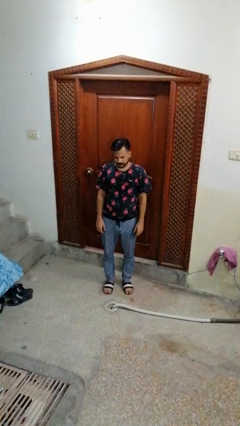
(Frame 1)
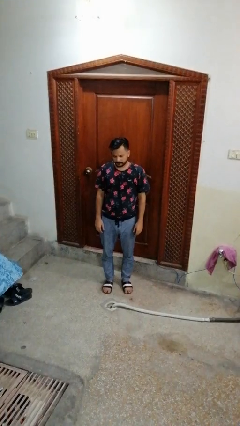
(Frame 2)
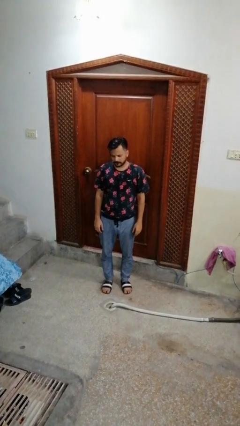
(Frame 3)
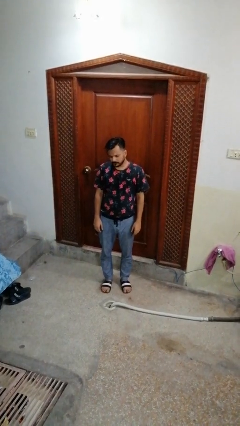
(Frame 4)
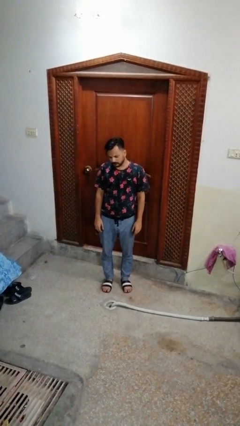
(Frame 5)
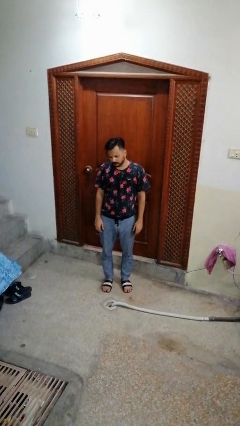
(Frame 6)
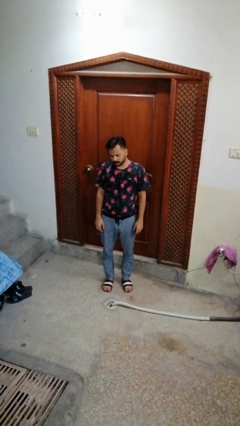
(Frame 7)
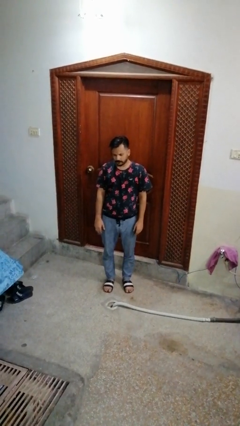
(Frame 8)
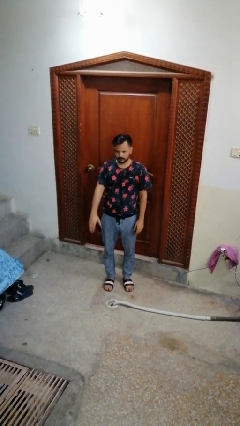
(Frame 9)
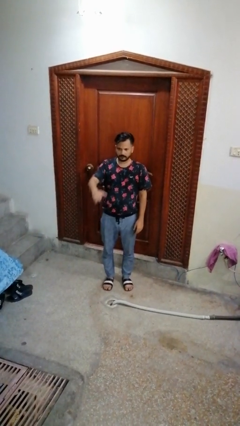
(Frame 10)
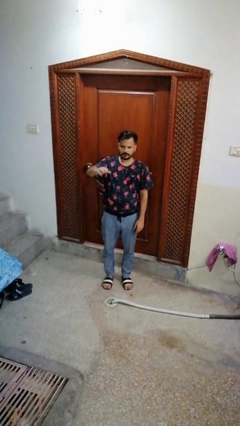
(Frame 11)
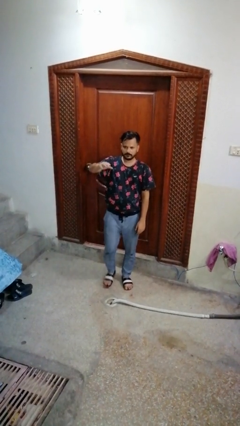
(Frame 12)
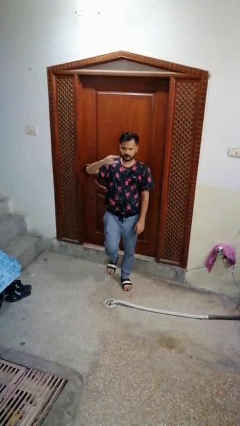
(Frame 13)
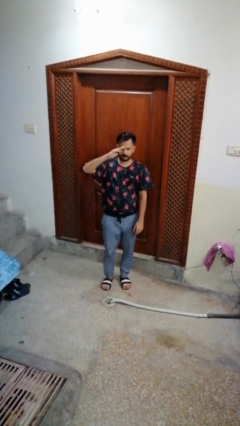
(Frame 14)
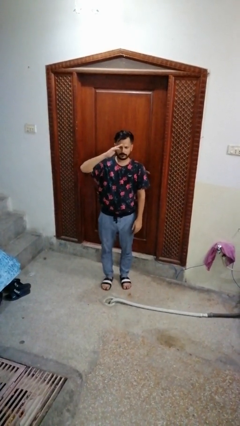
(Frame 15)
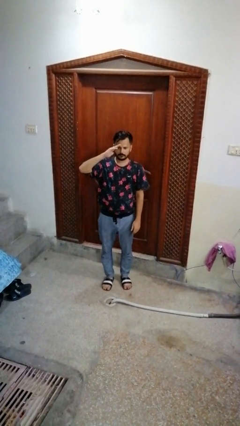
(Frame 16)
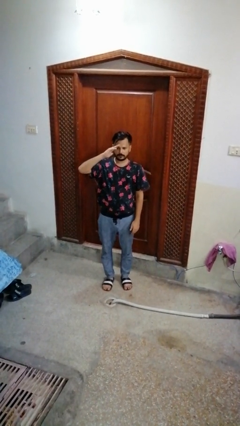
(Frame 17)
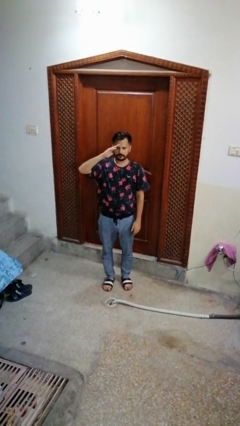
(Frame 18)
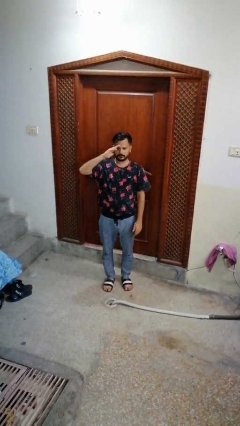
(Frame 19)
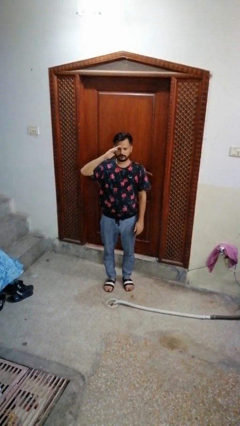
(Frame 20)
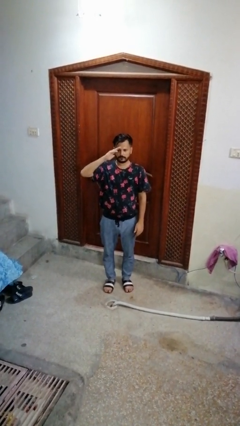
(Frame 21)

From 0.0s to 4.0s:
person salutes

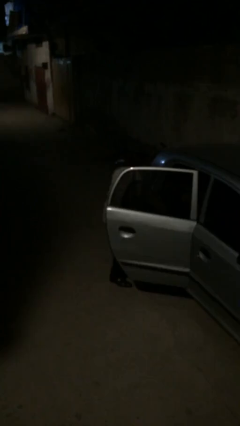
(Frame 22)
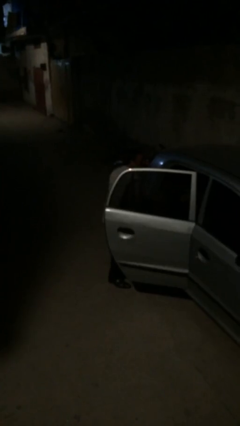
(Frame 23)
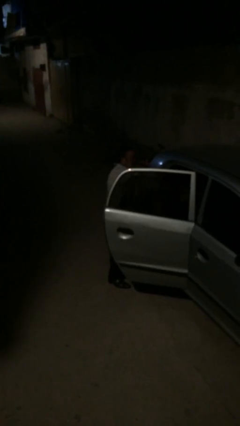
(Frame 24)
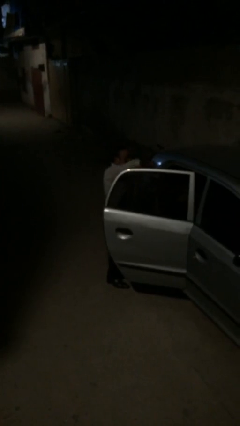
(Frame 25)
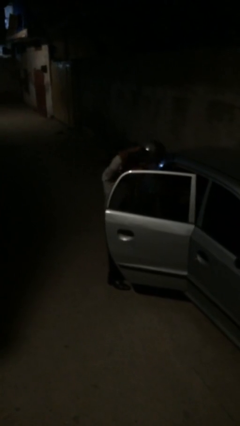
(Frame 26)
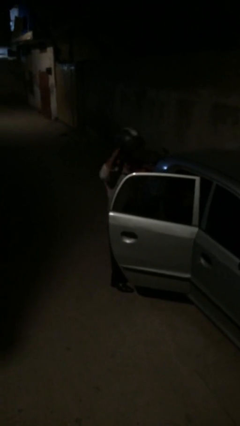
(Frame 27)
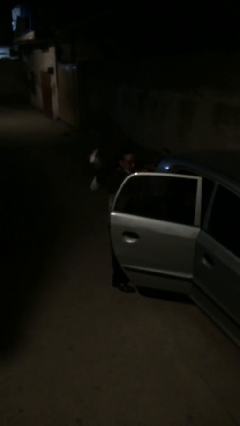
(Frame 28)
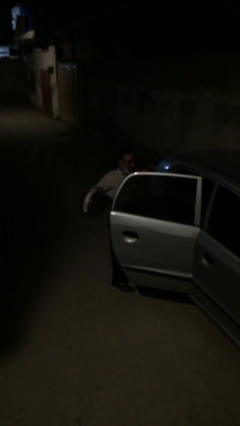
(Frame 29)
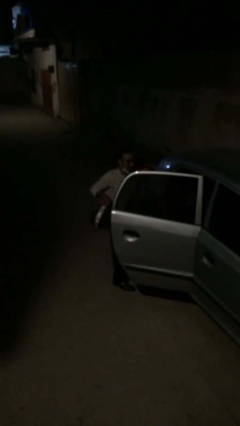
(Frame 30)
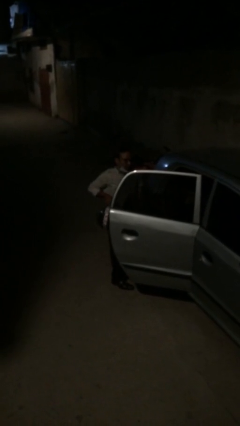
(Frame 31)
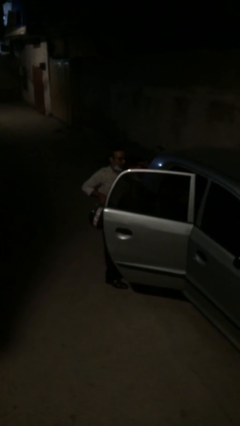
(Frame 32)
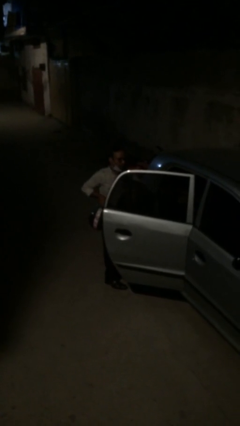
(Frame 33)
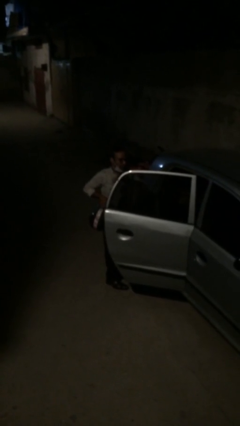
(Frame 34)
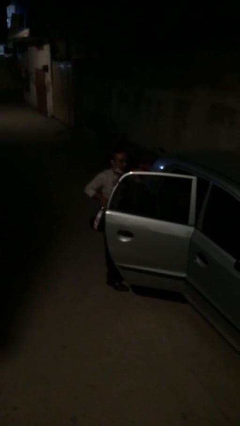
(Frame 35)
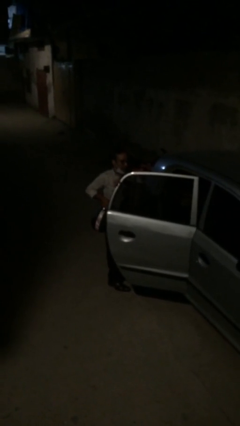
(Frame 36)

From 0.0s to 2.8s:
person unloads car

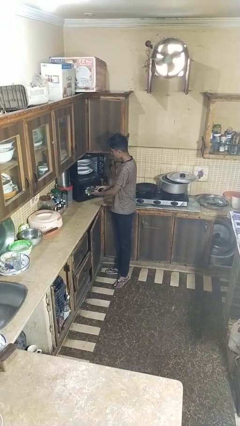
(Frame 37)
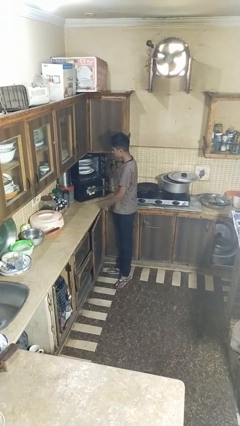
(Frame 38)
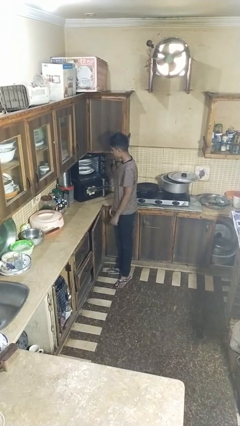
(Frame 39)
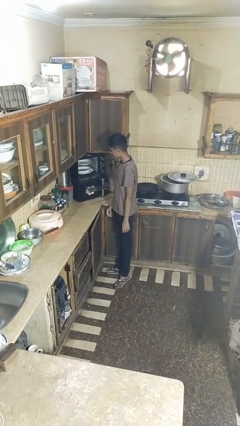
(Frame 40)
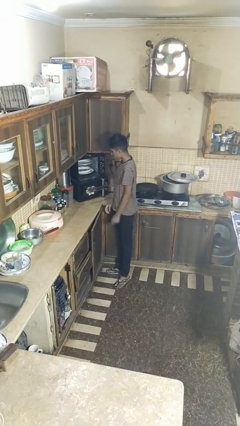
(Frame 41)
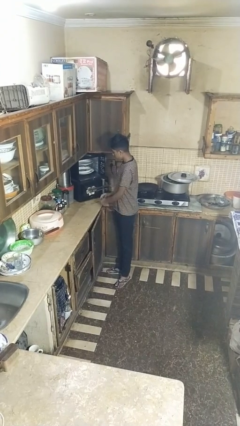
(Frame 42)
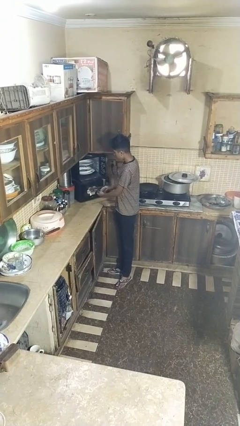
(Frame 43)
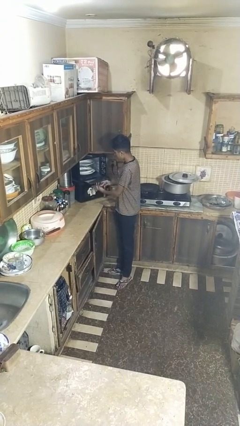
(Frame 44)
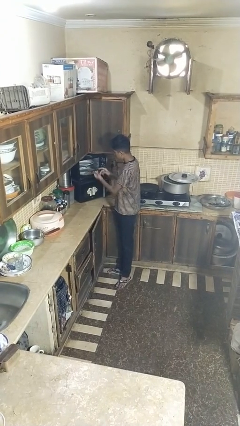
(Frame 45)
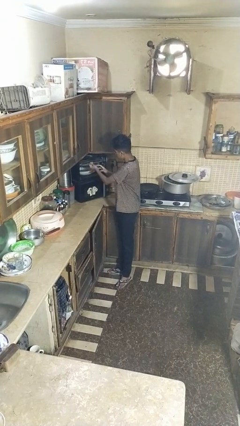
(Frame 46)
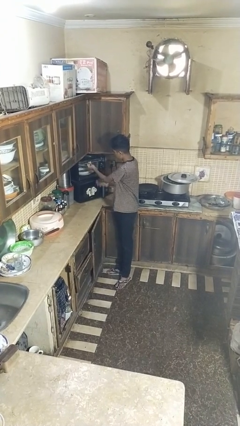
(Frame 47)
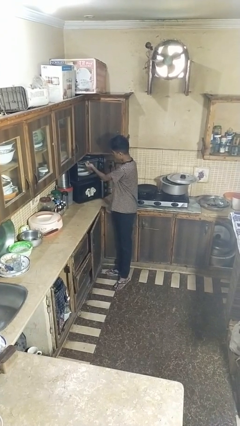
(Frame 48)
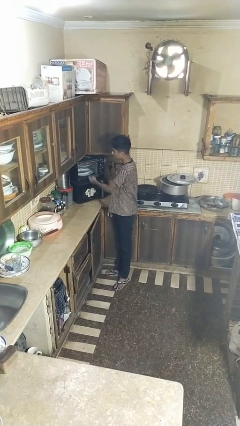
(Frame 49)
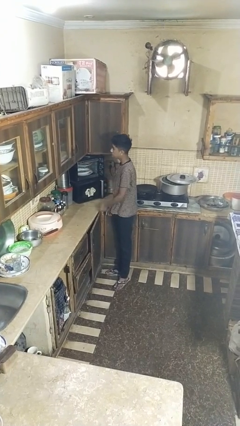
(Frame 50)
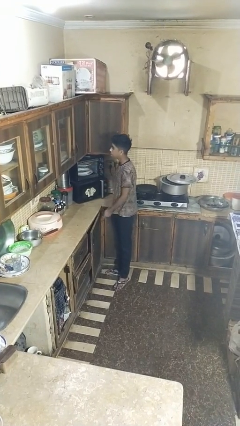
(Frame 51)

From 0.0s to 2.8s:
person closes dishwasher

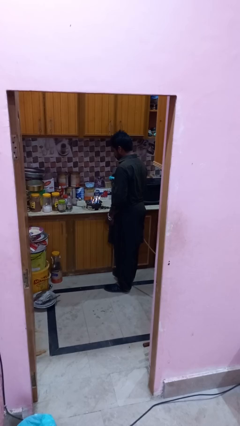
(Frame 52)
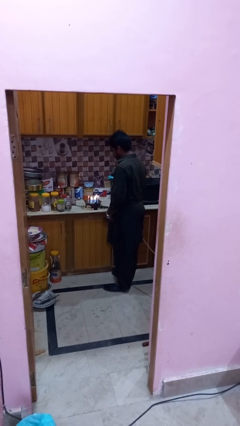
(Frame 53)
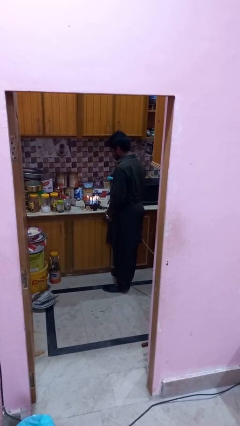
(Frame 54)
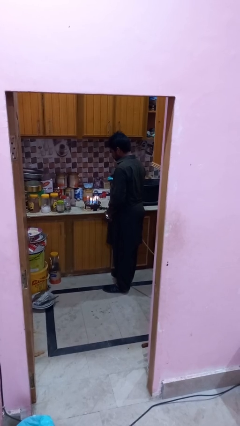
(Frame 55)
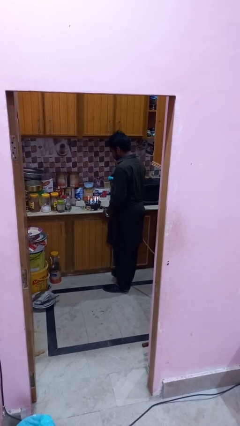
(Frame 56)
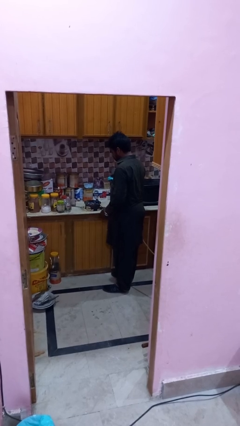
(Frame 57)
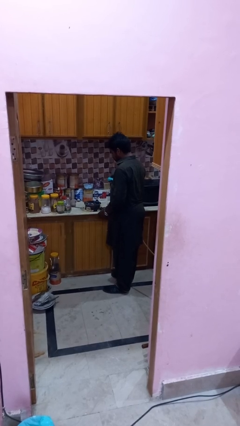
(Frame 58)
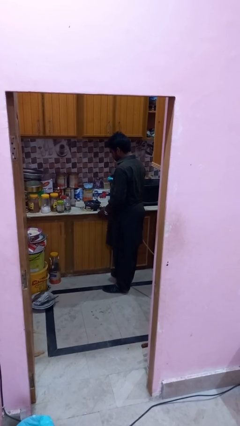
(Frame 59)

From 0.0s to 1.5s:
person turns off stovetop

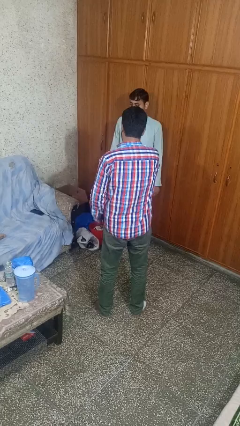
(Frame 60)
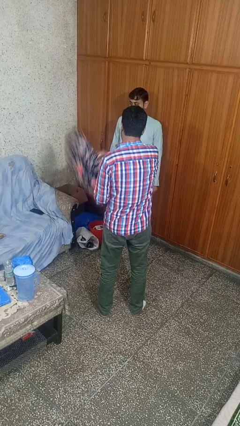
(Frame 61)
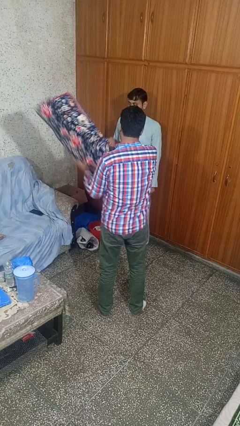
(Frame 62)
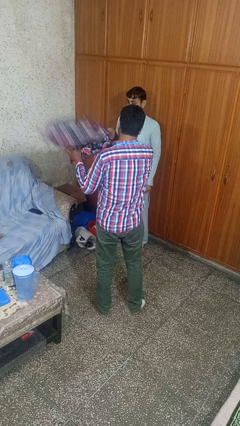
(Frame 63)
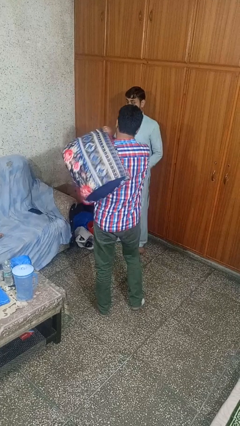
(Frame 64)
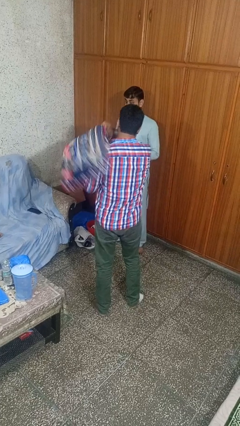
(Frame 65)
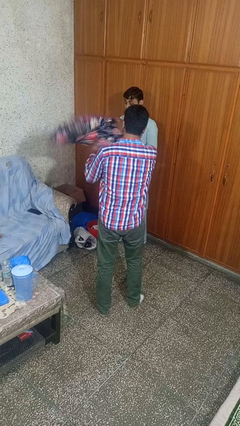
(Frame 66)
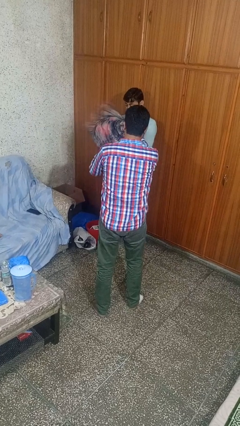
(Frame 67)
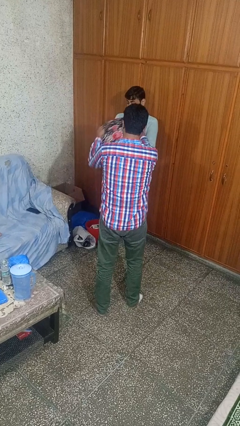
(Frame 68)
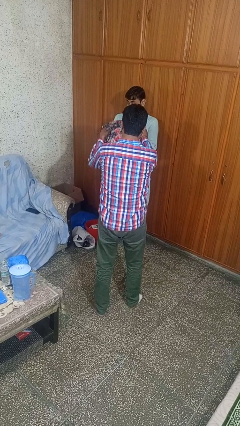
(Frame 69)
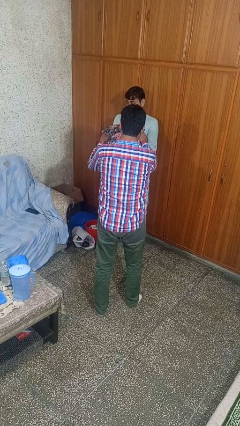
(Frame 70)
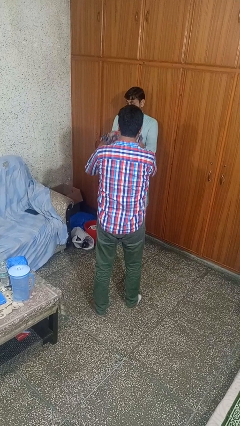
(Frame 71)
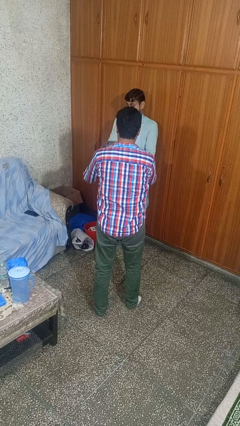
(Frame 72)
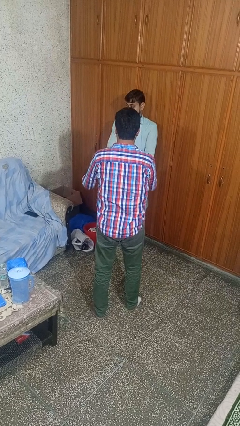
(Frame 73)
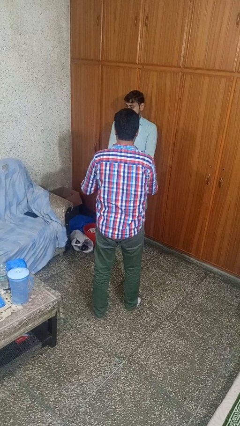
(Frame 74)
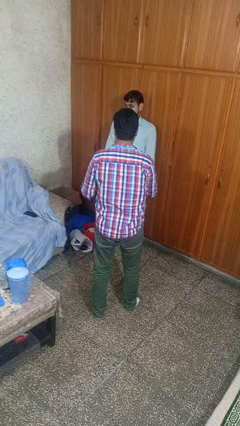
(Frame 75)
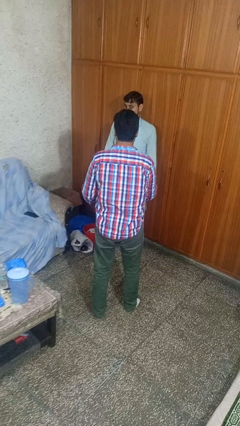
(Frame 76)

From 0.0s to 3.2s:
person hits person with pillow

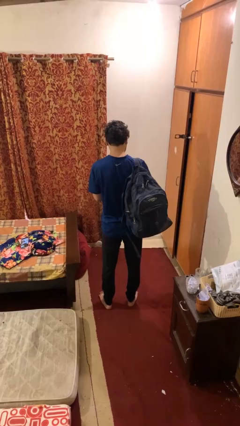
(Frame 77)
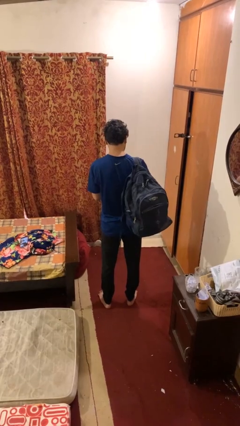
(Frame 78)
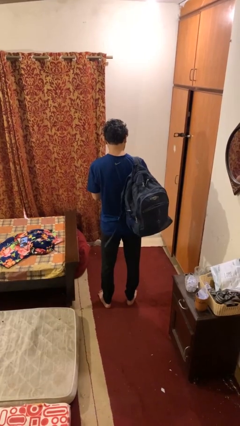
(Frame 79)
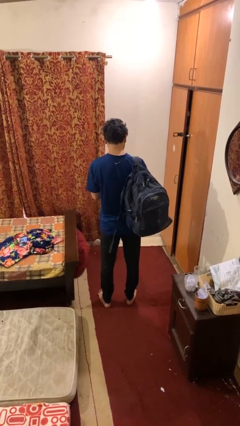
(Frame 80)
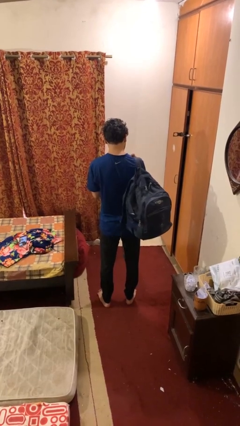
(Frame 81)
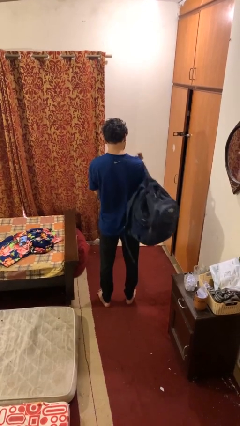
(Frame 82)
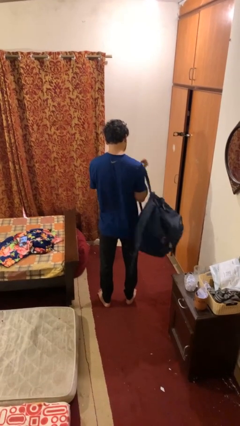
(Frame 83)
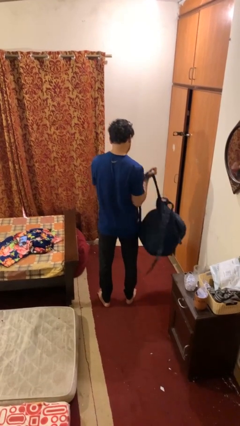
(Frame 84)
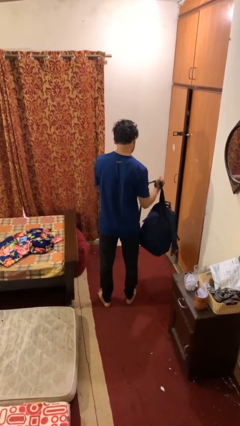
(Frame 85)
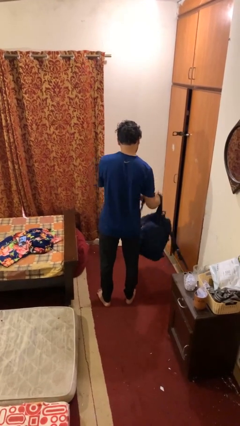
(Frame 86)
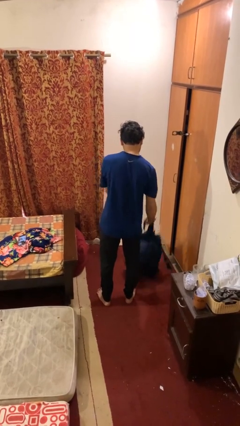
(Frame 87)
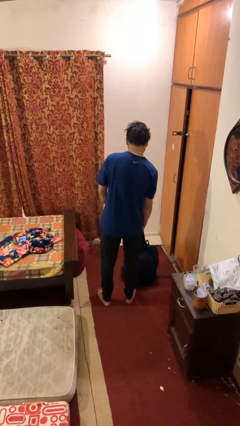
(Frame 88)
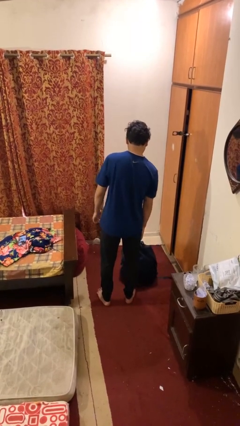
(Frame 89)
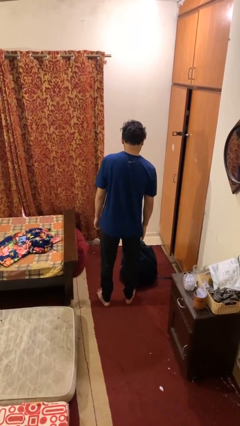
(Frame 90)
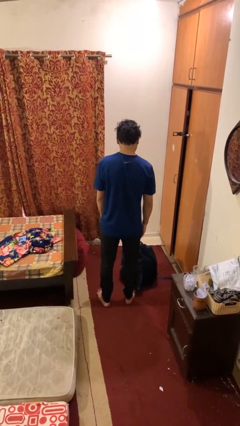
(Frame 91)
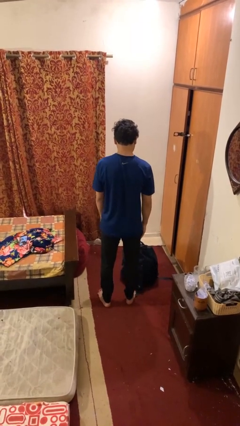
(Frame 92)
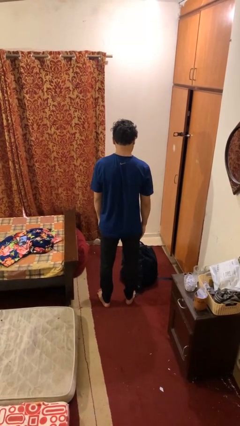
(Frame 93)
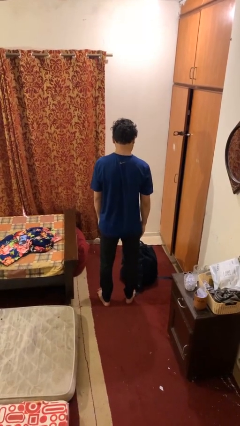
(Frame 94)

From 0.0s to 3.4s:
person takes off backpack
